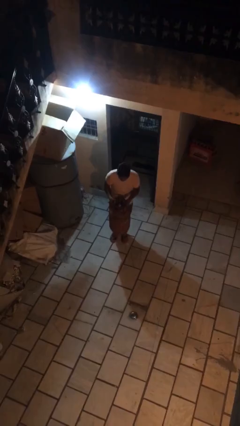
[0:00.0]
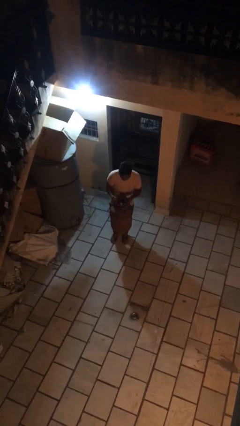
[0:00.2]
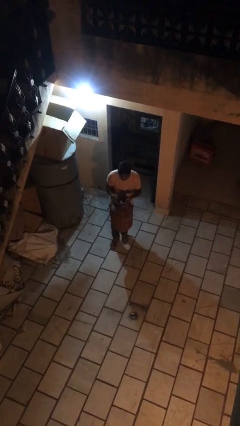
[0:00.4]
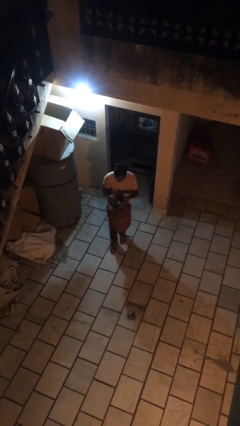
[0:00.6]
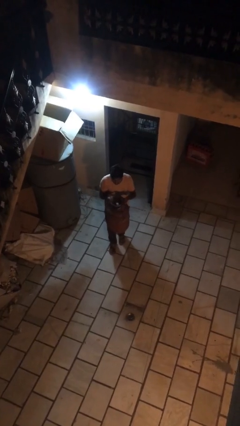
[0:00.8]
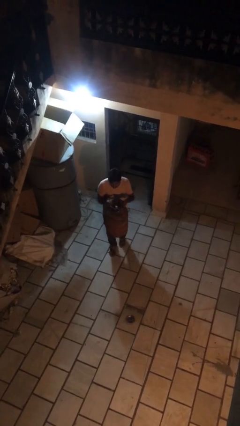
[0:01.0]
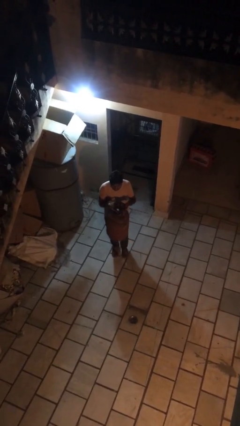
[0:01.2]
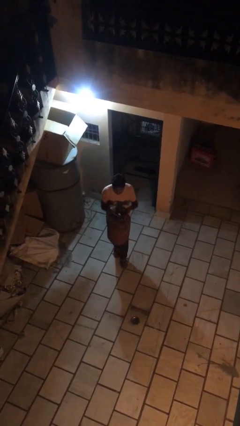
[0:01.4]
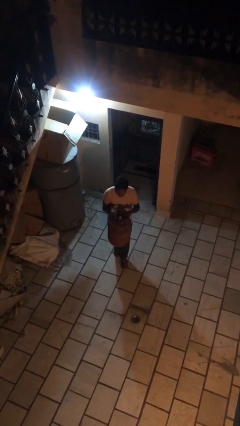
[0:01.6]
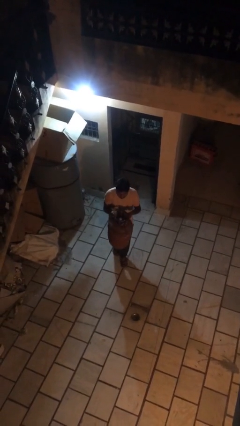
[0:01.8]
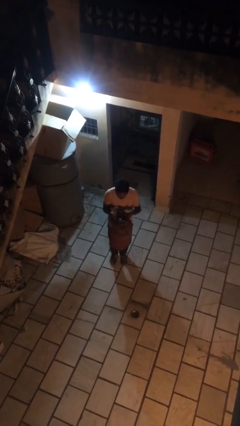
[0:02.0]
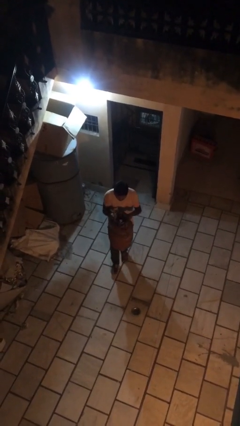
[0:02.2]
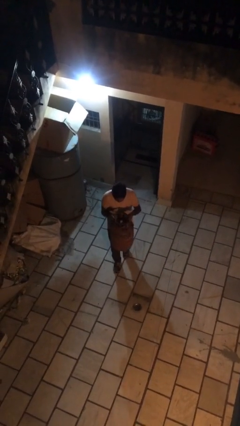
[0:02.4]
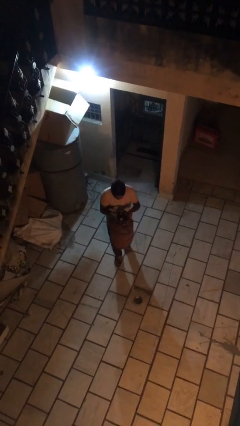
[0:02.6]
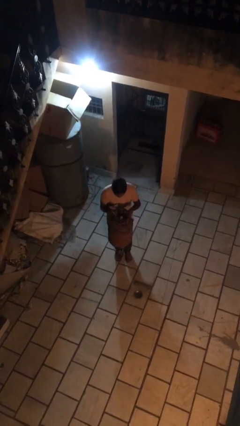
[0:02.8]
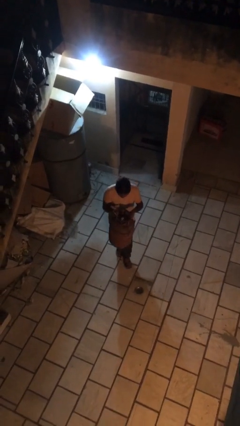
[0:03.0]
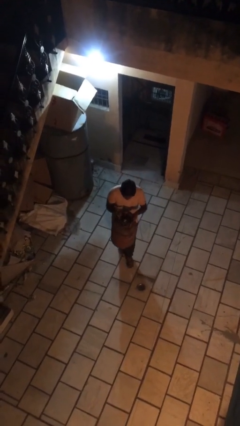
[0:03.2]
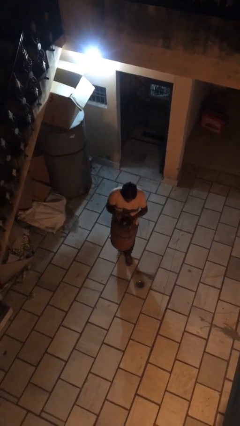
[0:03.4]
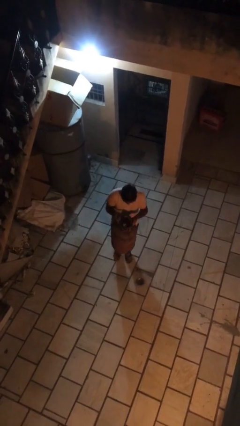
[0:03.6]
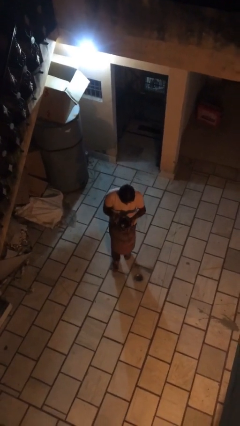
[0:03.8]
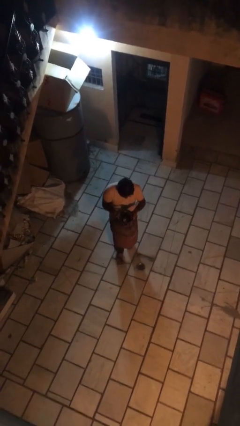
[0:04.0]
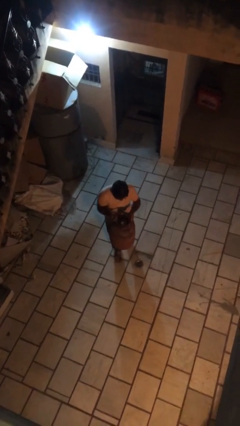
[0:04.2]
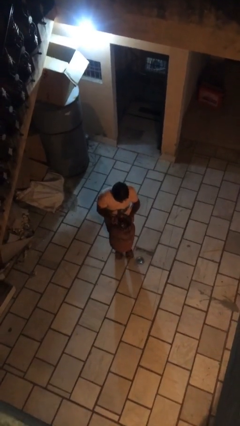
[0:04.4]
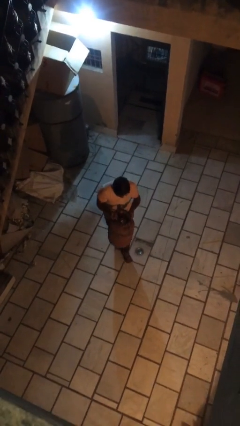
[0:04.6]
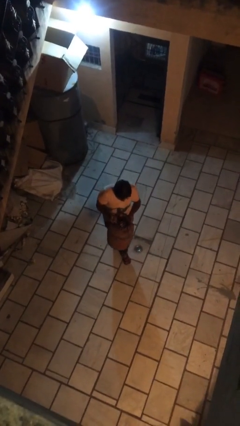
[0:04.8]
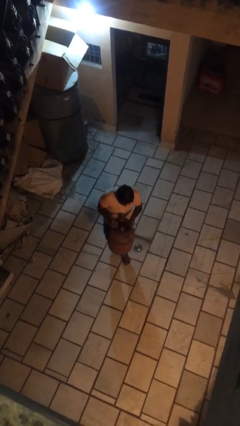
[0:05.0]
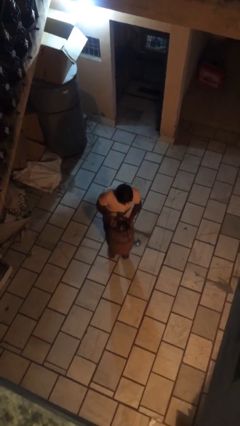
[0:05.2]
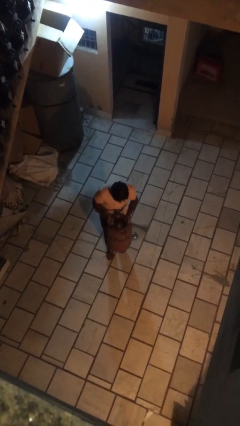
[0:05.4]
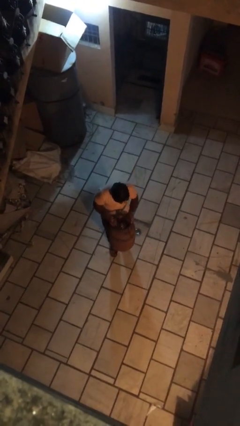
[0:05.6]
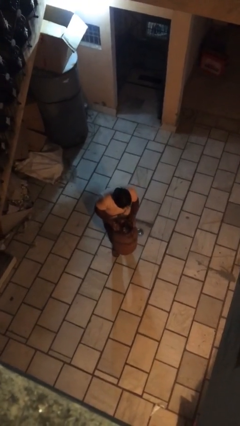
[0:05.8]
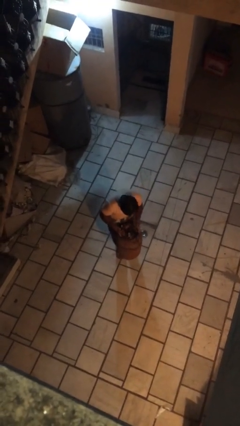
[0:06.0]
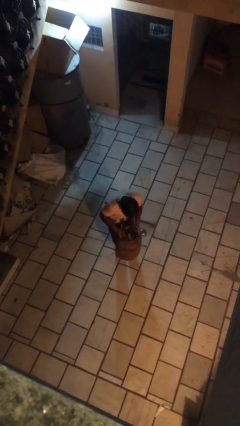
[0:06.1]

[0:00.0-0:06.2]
person carries heavy object

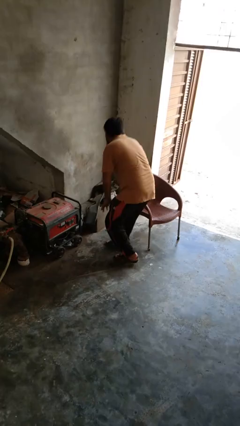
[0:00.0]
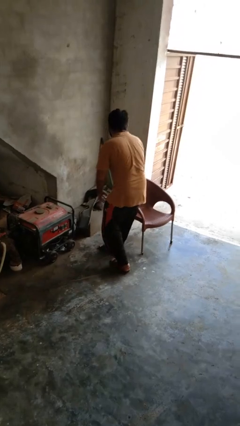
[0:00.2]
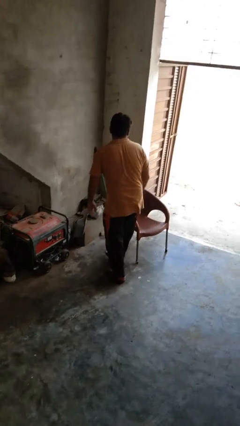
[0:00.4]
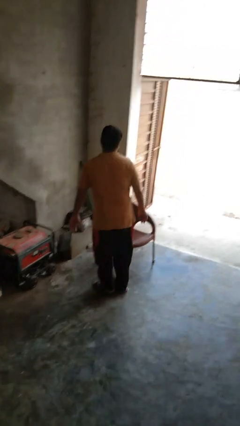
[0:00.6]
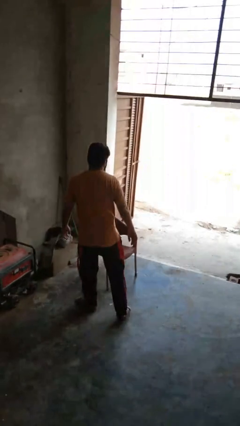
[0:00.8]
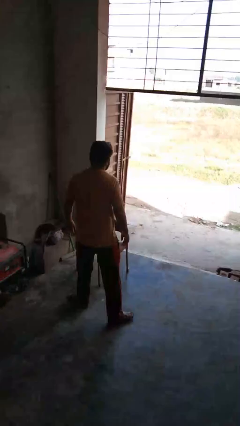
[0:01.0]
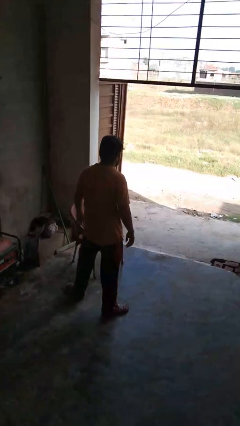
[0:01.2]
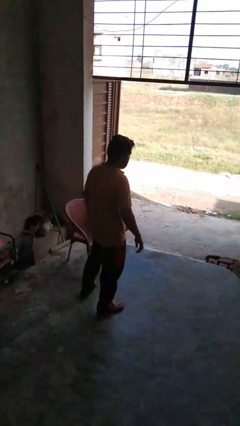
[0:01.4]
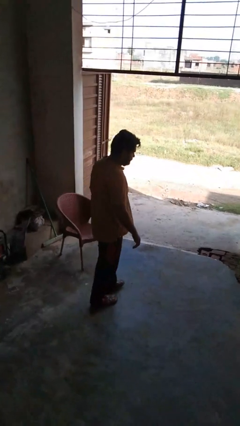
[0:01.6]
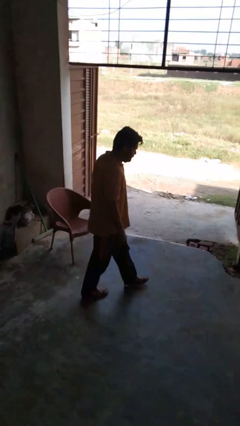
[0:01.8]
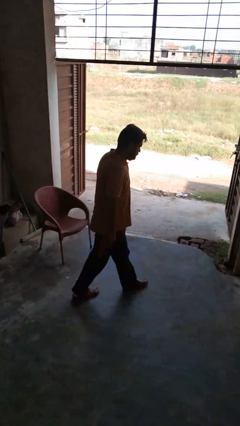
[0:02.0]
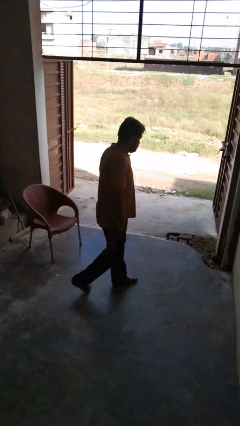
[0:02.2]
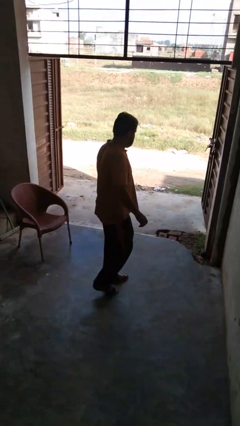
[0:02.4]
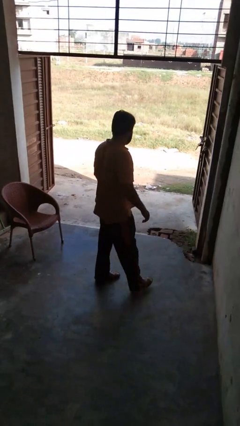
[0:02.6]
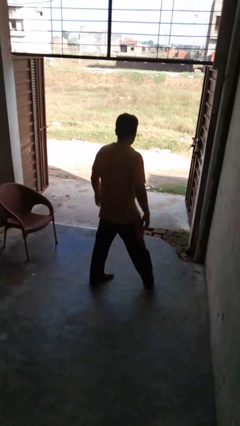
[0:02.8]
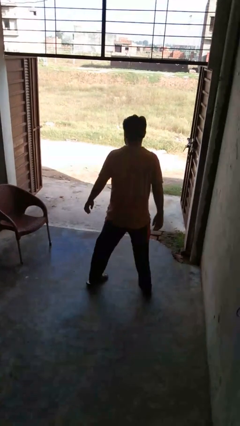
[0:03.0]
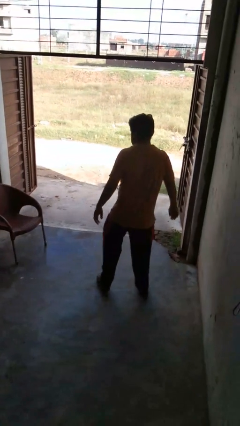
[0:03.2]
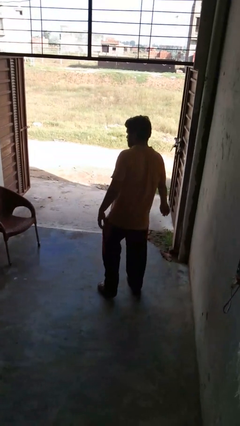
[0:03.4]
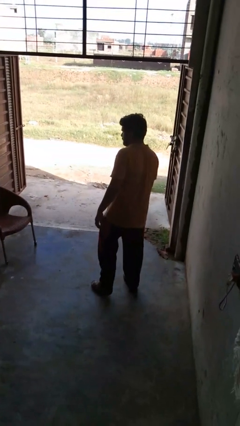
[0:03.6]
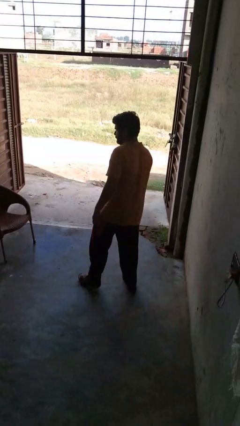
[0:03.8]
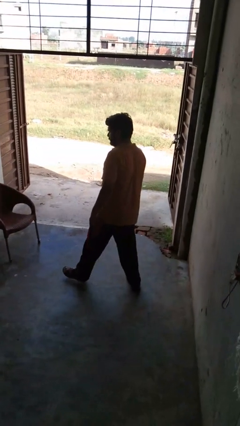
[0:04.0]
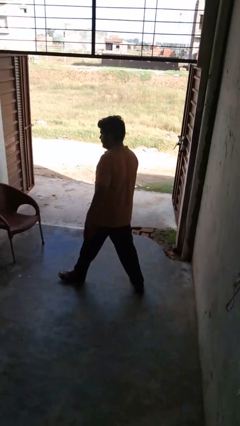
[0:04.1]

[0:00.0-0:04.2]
person stands up from floor

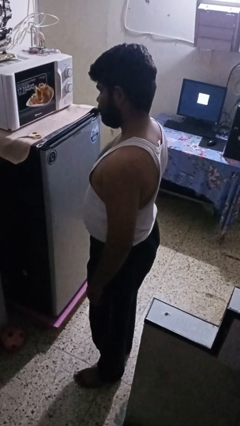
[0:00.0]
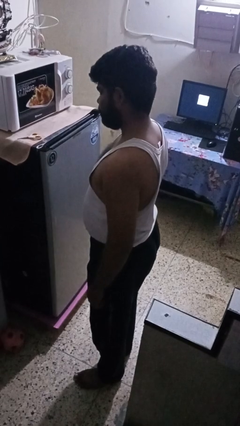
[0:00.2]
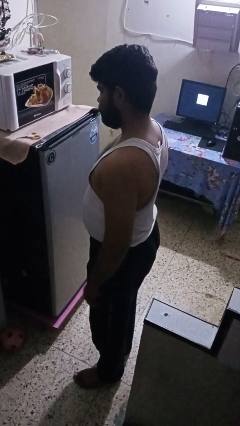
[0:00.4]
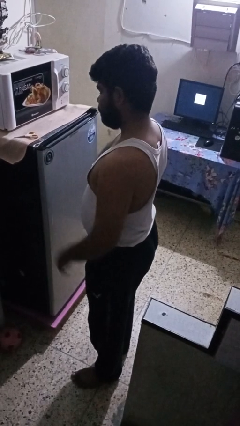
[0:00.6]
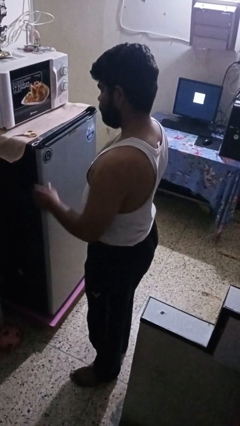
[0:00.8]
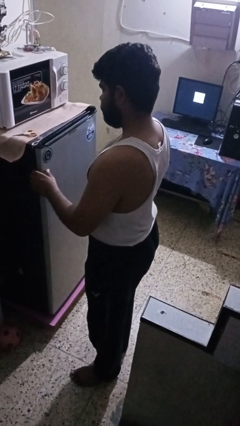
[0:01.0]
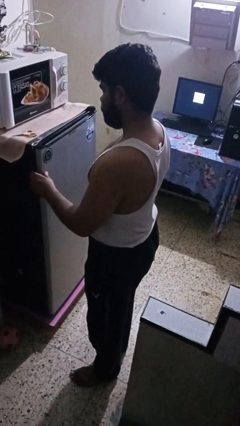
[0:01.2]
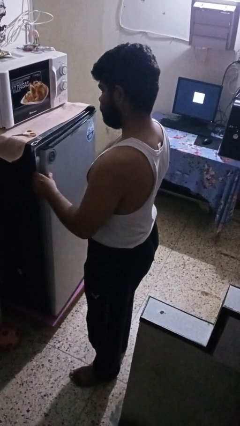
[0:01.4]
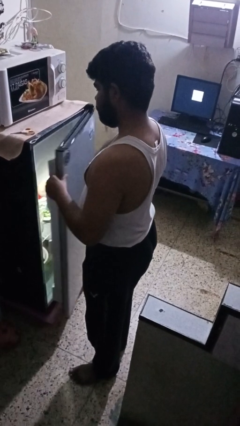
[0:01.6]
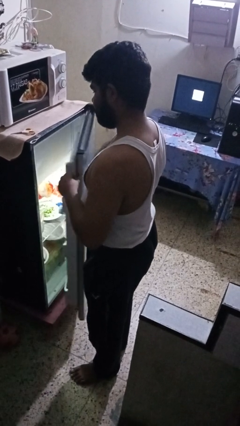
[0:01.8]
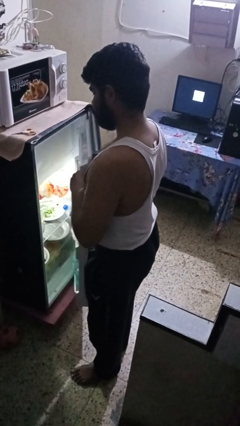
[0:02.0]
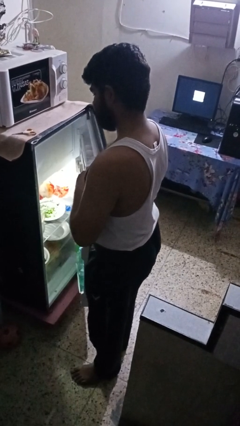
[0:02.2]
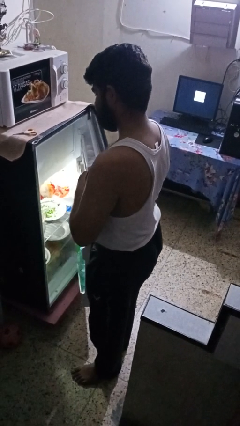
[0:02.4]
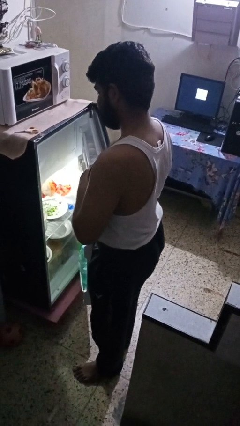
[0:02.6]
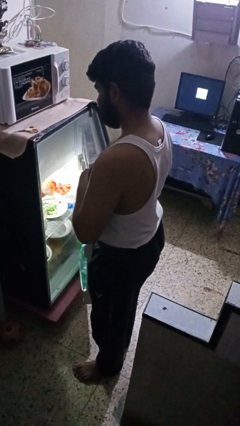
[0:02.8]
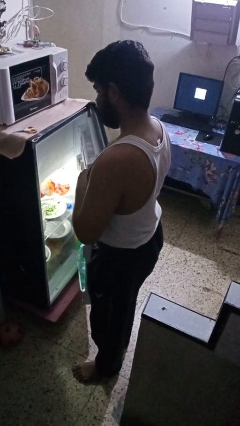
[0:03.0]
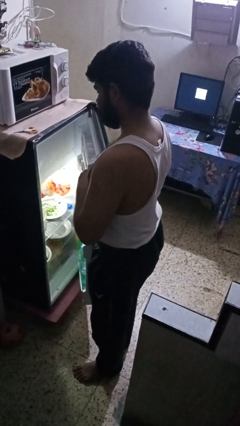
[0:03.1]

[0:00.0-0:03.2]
person opens refrigerator

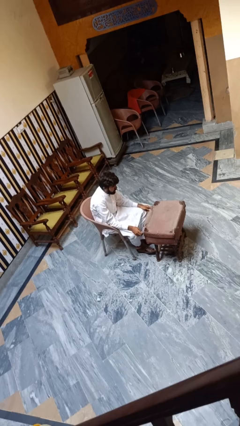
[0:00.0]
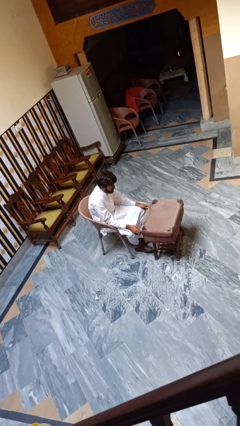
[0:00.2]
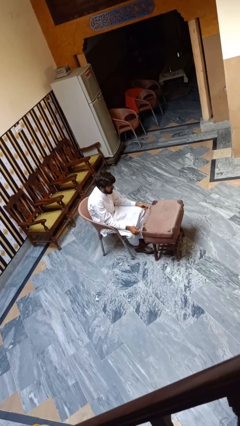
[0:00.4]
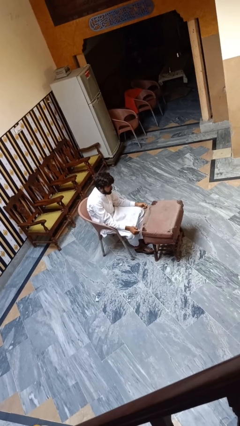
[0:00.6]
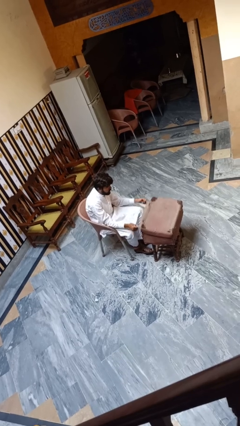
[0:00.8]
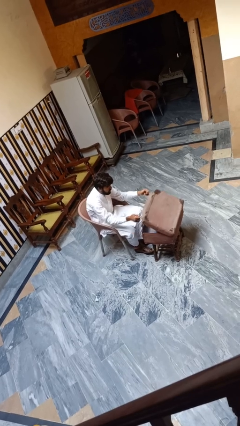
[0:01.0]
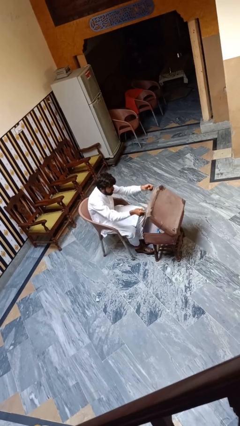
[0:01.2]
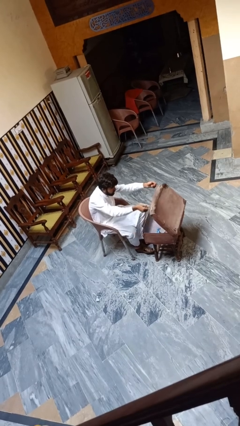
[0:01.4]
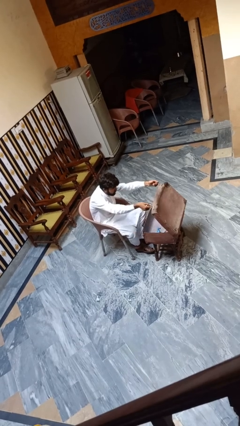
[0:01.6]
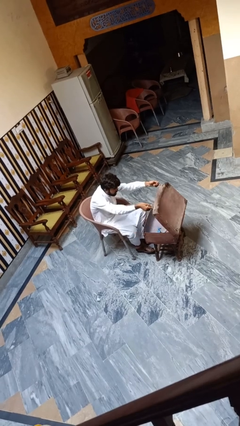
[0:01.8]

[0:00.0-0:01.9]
person opens suitcase

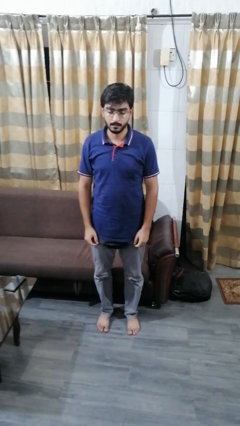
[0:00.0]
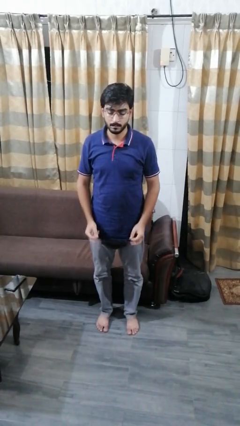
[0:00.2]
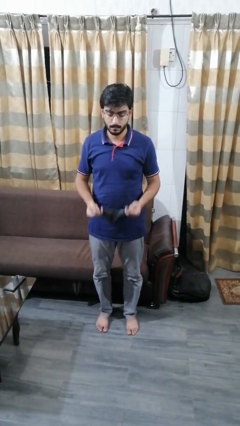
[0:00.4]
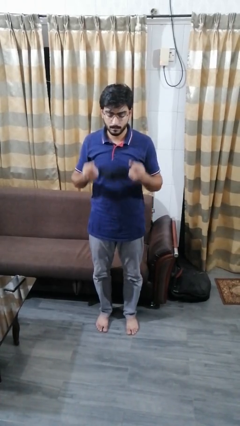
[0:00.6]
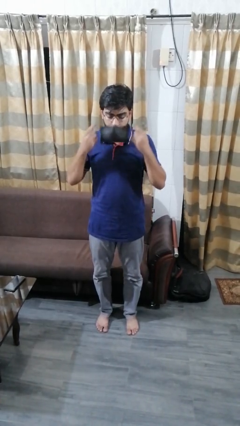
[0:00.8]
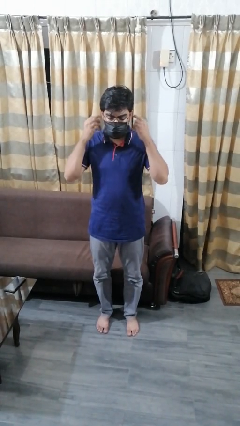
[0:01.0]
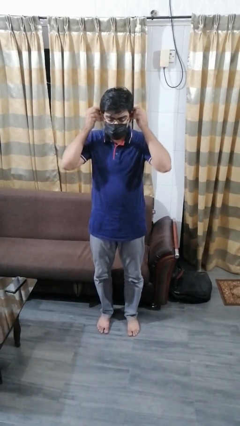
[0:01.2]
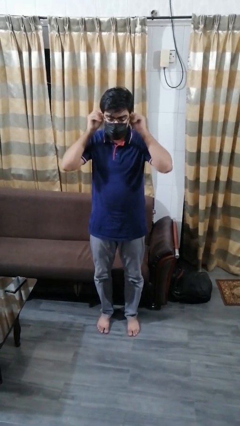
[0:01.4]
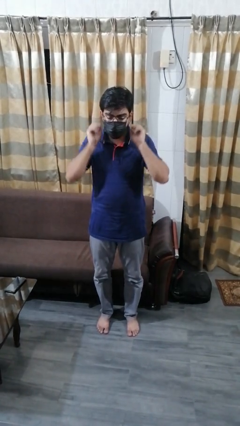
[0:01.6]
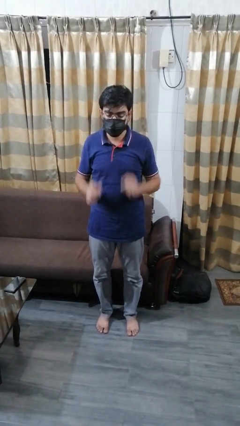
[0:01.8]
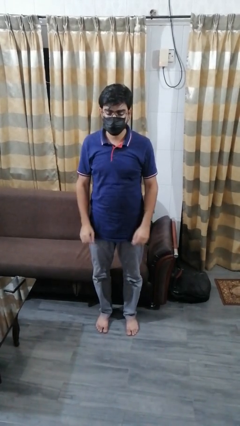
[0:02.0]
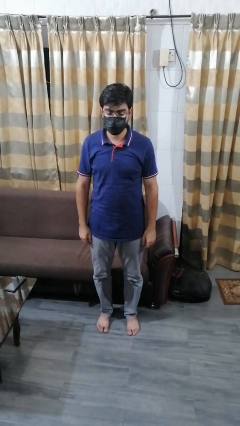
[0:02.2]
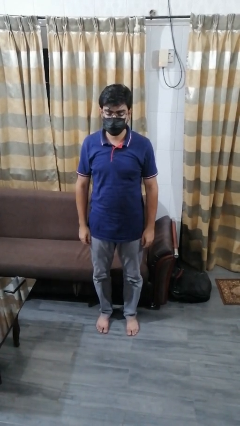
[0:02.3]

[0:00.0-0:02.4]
person puts on facemask
